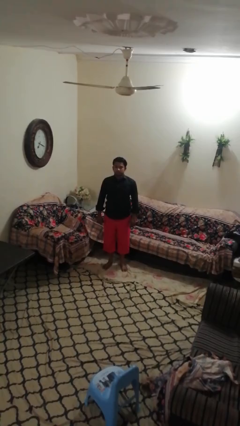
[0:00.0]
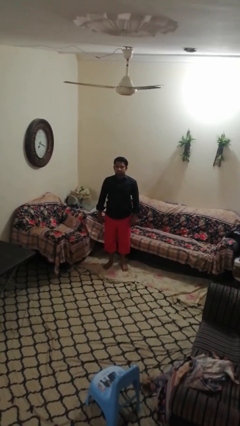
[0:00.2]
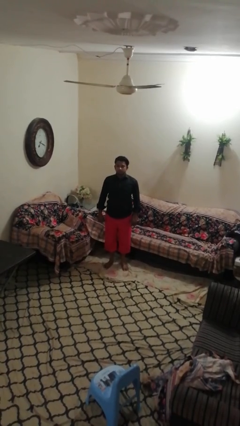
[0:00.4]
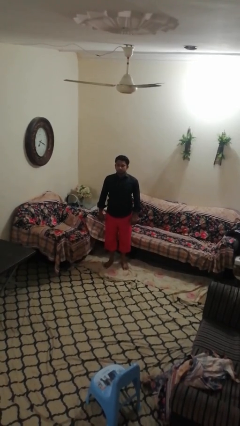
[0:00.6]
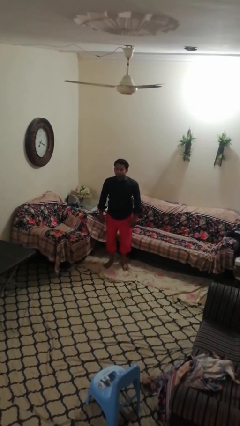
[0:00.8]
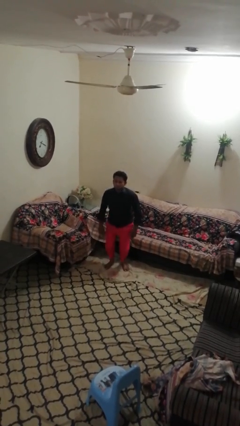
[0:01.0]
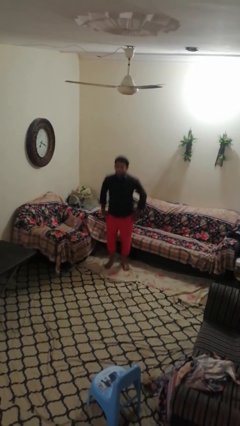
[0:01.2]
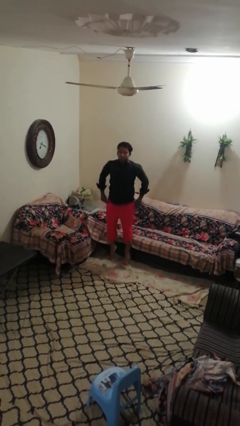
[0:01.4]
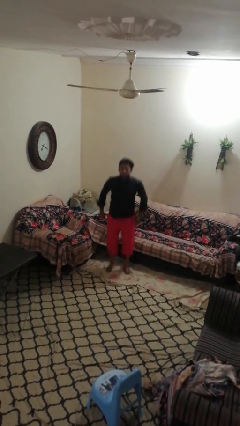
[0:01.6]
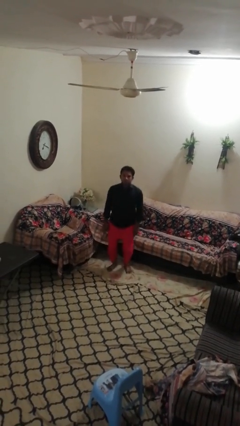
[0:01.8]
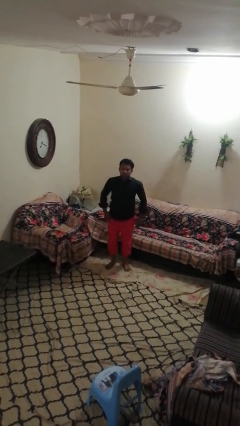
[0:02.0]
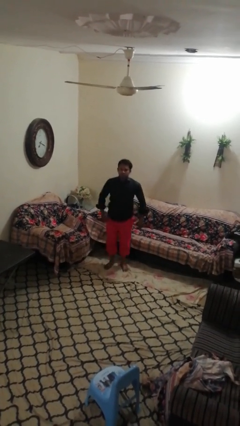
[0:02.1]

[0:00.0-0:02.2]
person jumps

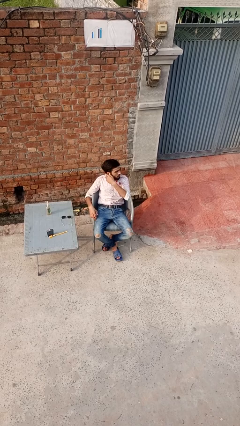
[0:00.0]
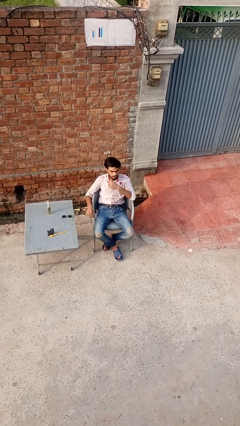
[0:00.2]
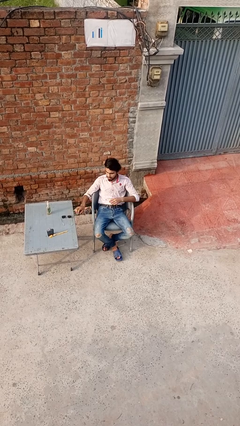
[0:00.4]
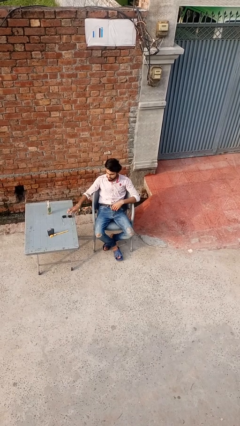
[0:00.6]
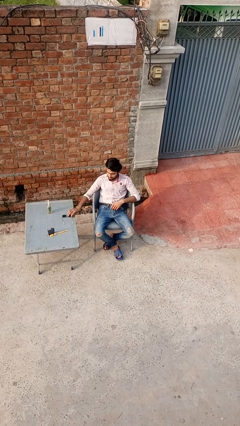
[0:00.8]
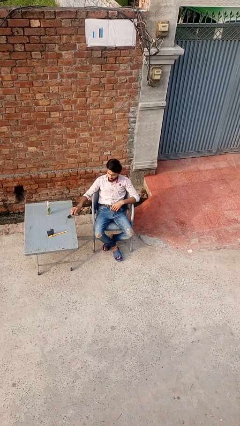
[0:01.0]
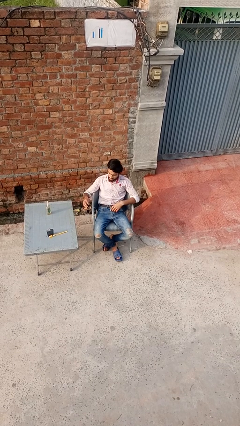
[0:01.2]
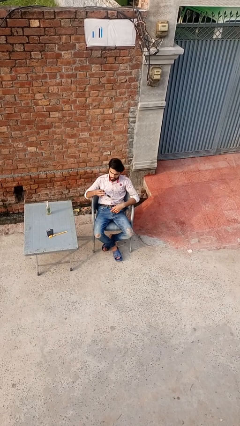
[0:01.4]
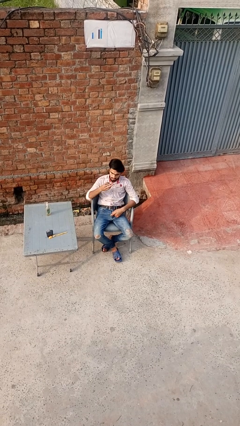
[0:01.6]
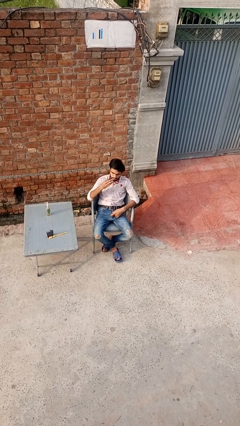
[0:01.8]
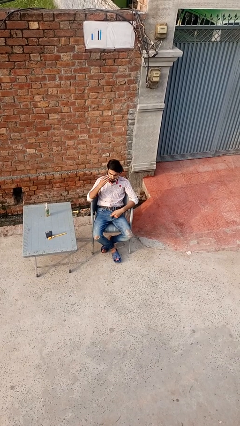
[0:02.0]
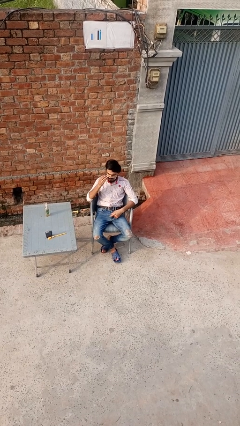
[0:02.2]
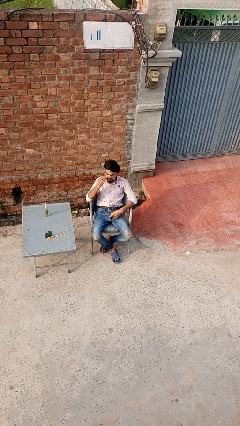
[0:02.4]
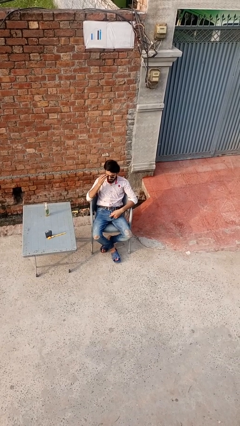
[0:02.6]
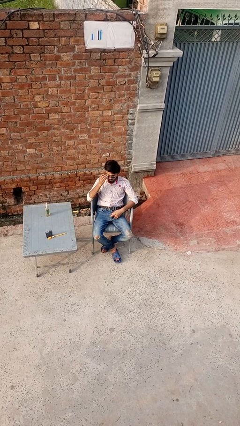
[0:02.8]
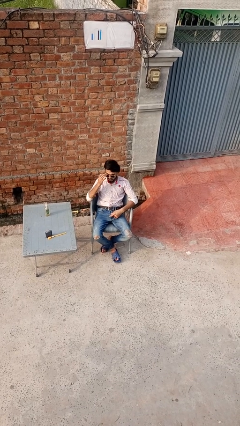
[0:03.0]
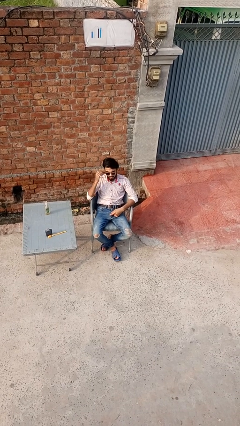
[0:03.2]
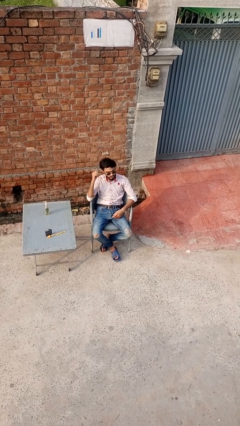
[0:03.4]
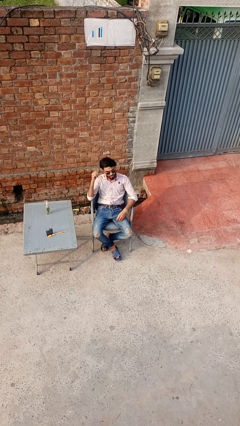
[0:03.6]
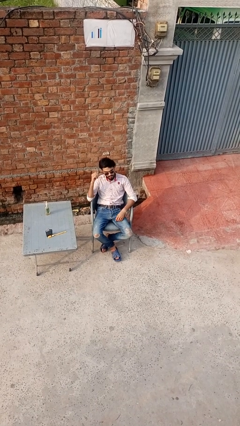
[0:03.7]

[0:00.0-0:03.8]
person puts on sunglasses

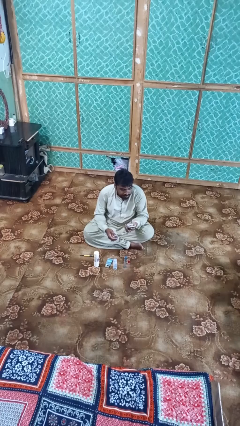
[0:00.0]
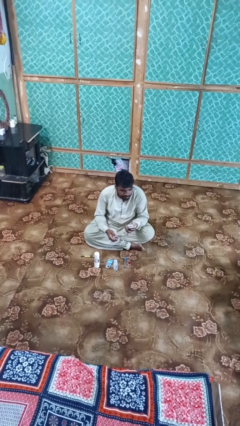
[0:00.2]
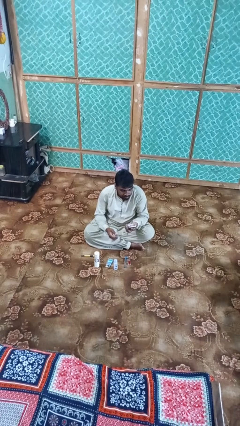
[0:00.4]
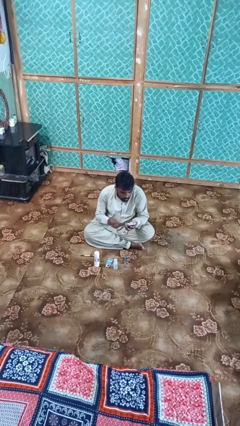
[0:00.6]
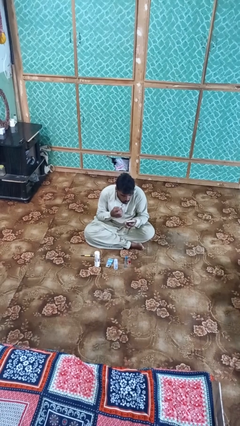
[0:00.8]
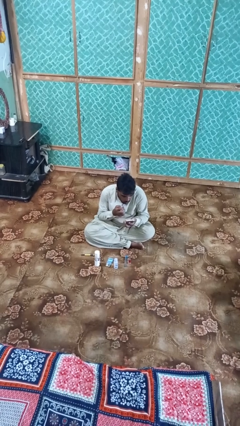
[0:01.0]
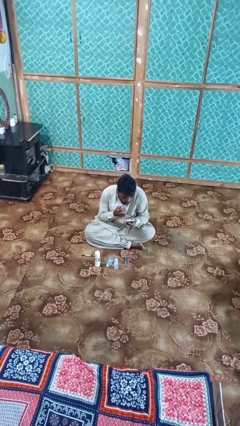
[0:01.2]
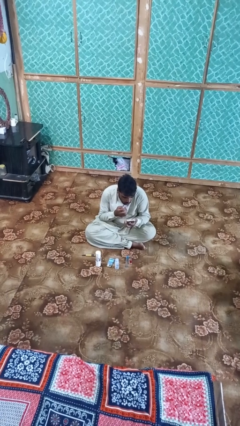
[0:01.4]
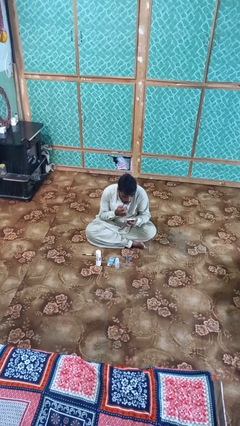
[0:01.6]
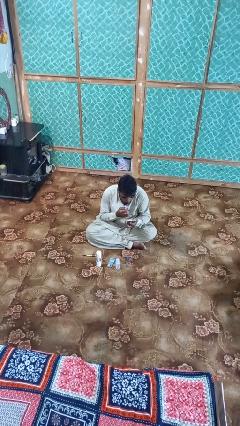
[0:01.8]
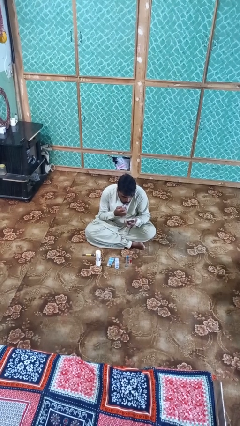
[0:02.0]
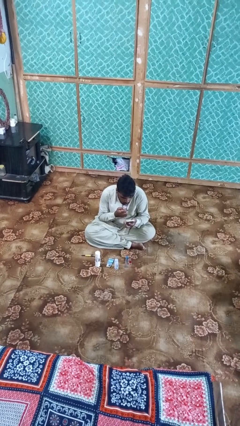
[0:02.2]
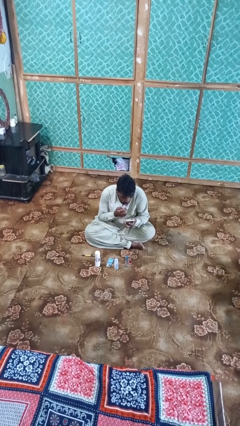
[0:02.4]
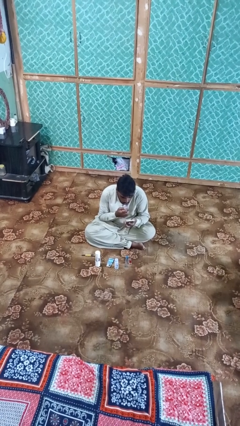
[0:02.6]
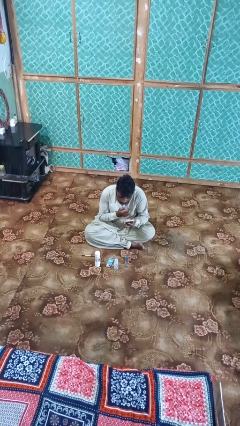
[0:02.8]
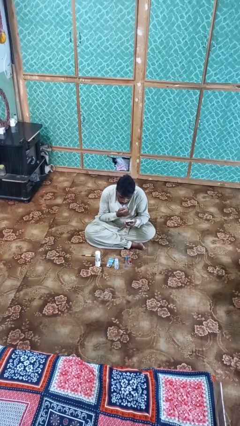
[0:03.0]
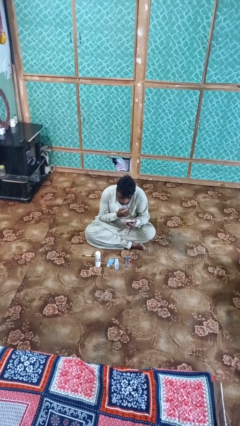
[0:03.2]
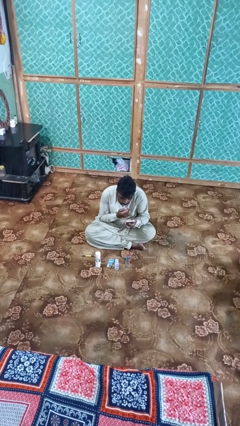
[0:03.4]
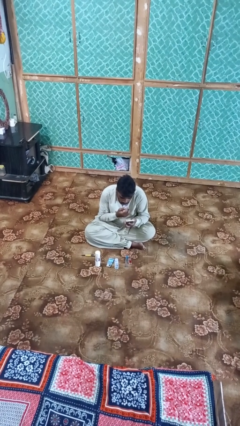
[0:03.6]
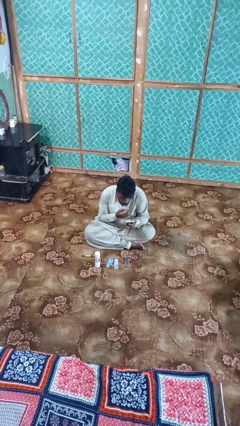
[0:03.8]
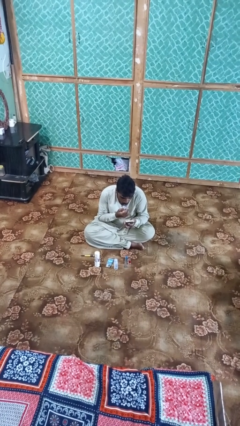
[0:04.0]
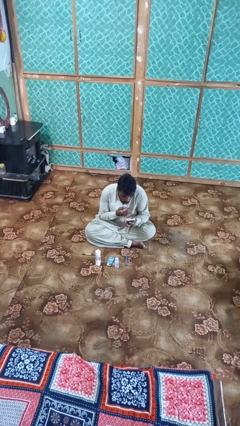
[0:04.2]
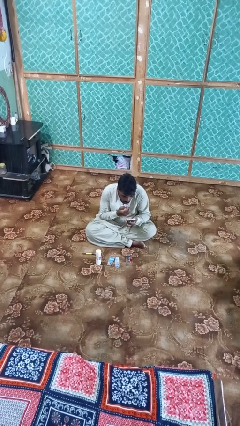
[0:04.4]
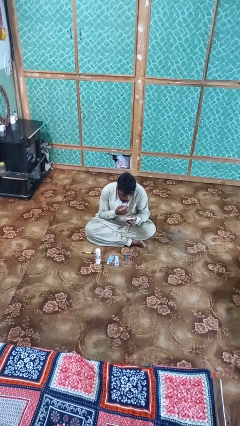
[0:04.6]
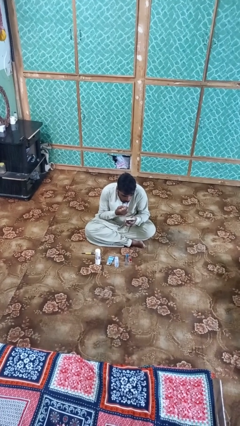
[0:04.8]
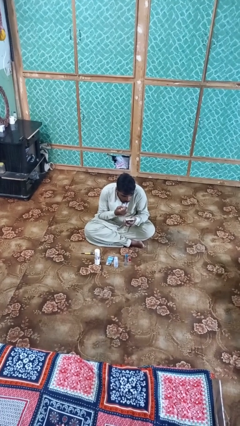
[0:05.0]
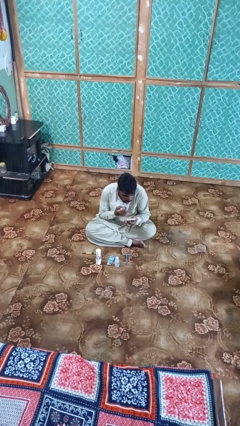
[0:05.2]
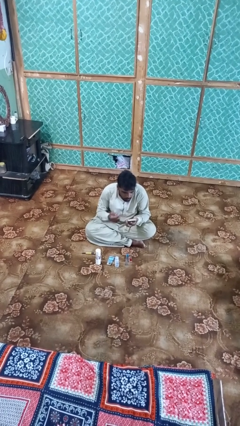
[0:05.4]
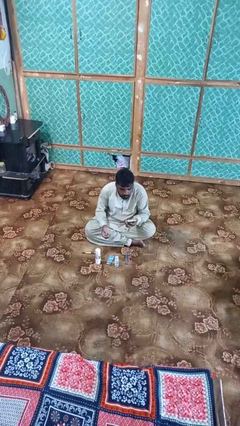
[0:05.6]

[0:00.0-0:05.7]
person applies lip makeup

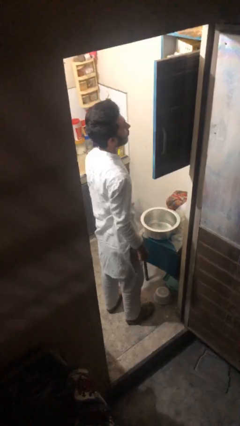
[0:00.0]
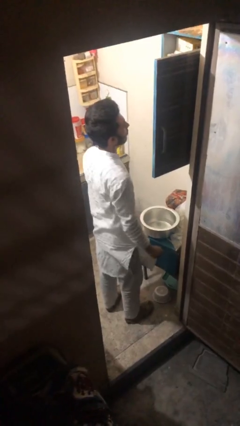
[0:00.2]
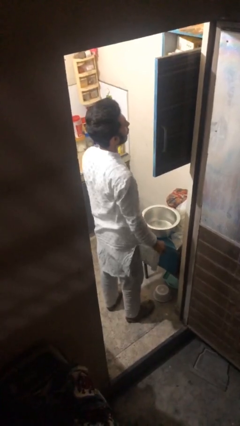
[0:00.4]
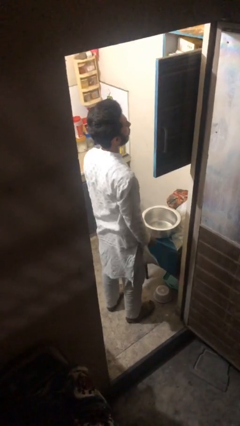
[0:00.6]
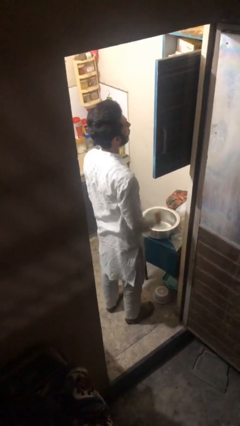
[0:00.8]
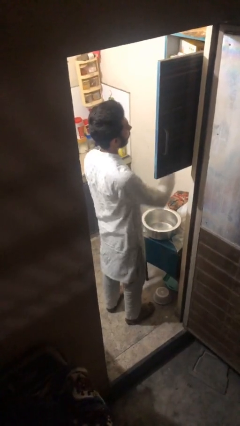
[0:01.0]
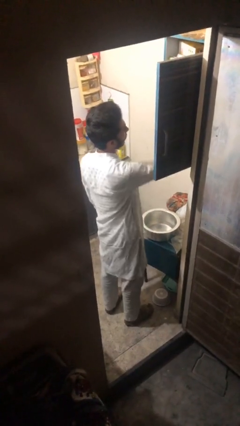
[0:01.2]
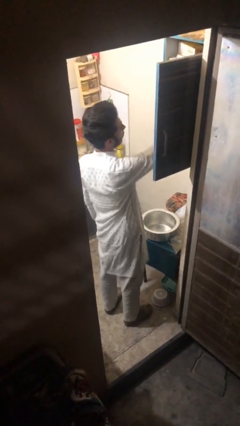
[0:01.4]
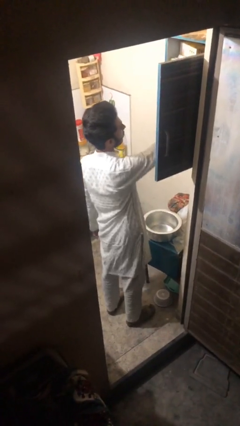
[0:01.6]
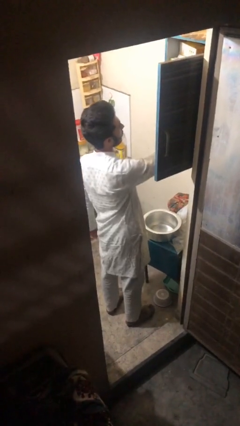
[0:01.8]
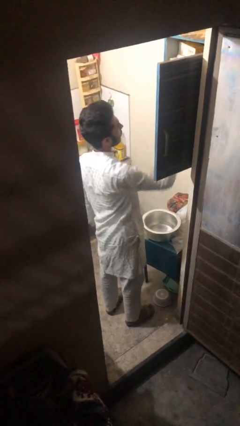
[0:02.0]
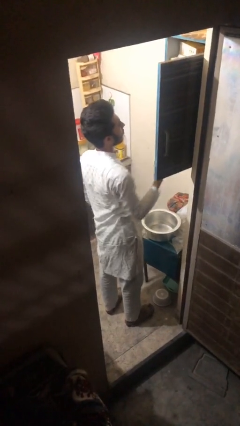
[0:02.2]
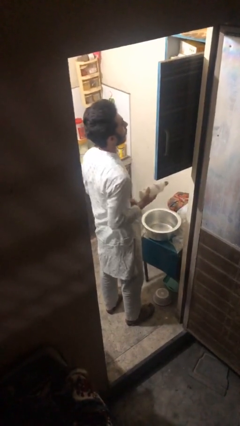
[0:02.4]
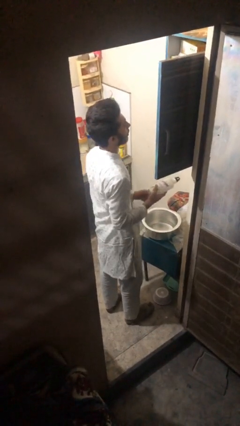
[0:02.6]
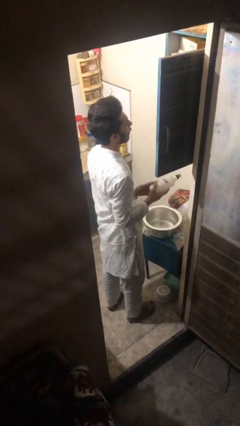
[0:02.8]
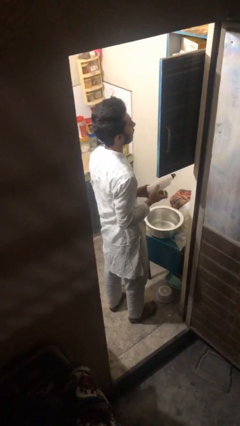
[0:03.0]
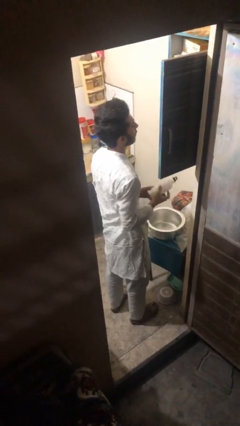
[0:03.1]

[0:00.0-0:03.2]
person takes object from cabinet

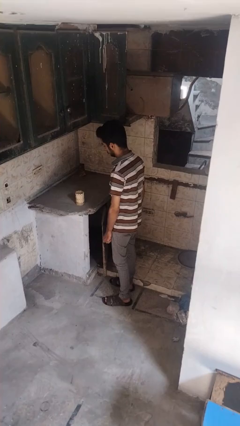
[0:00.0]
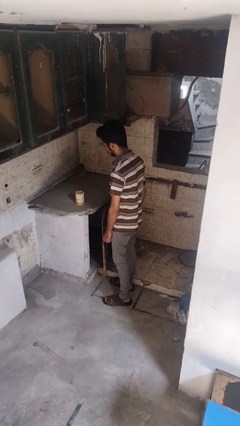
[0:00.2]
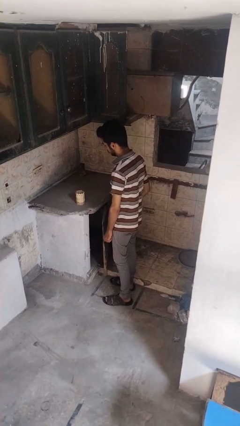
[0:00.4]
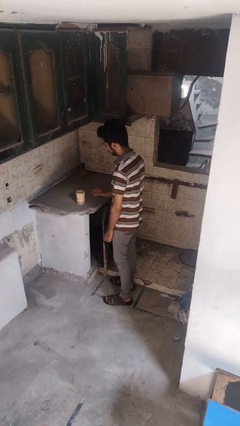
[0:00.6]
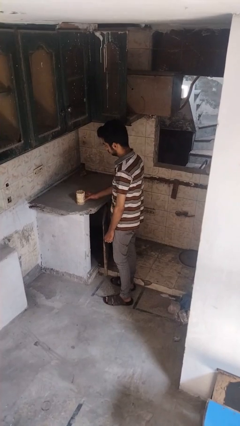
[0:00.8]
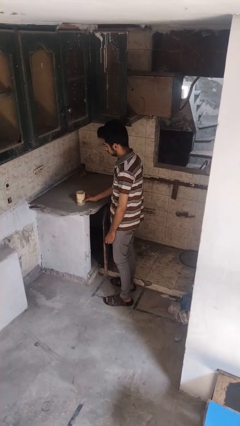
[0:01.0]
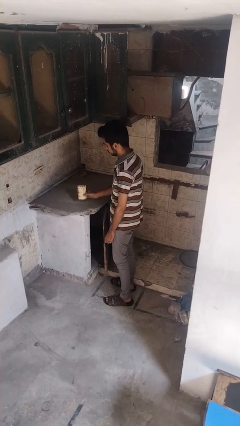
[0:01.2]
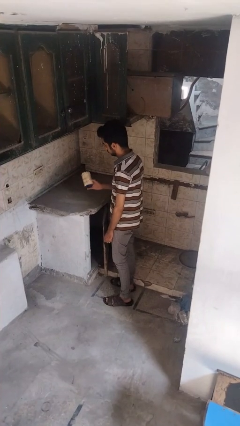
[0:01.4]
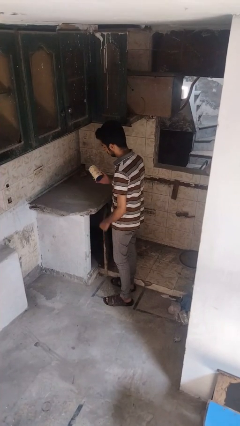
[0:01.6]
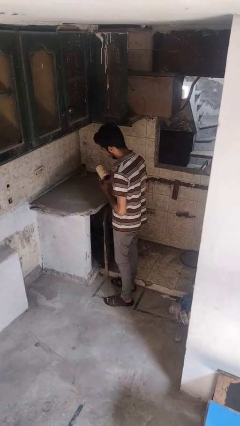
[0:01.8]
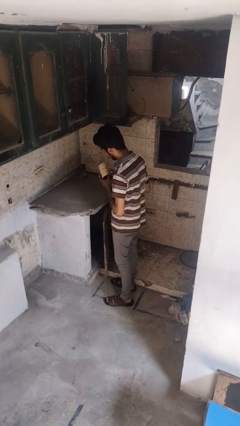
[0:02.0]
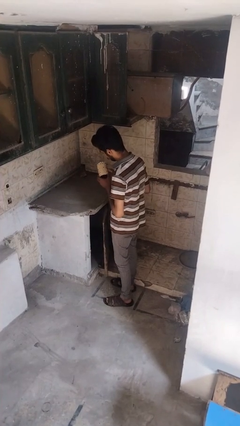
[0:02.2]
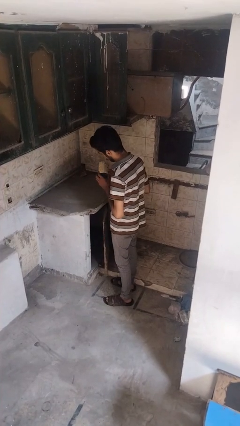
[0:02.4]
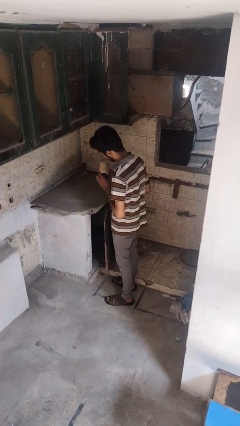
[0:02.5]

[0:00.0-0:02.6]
person picks up object from countertop

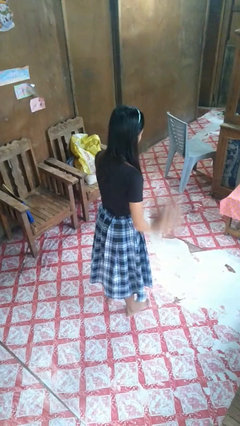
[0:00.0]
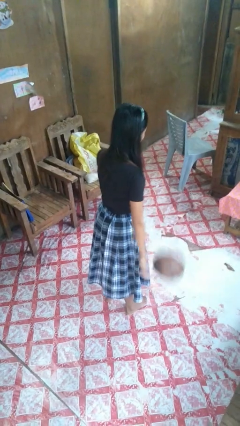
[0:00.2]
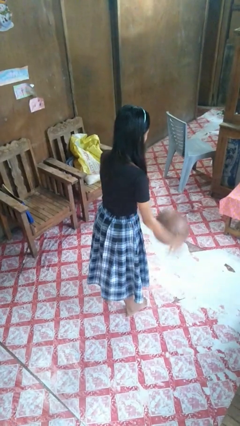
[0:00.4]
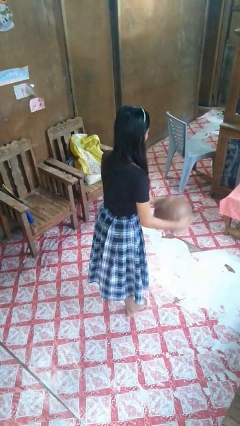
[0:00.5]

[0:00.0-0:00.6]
person bounces ball on floor
